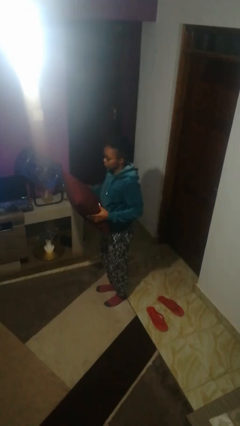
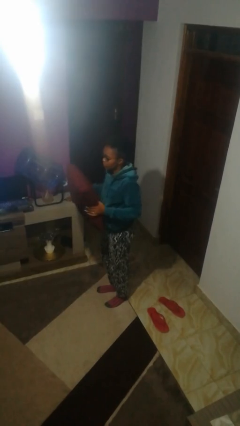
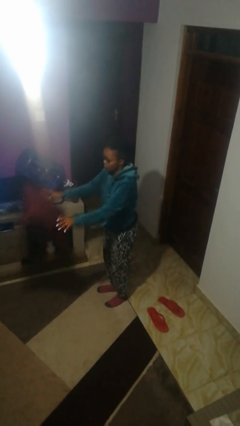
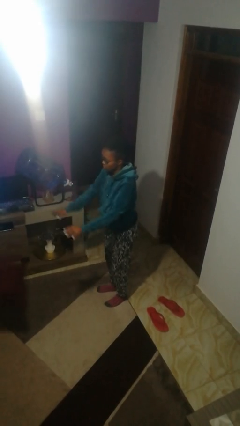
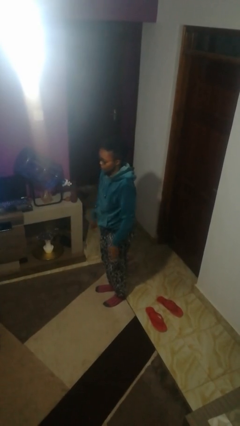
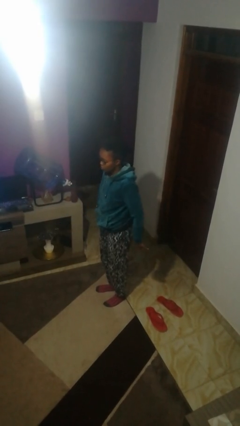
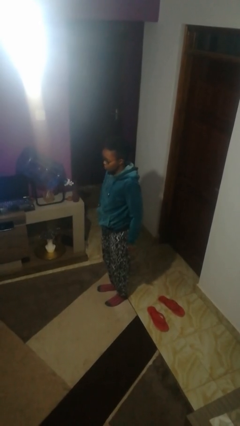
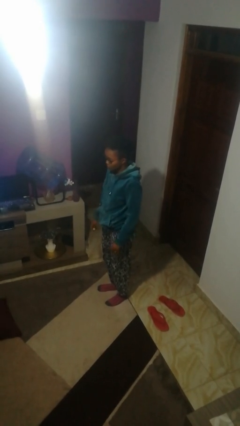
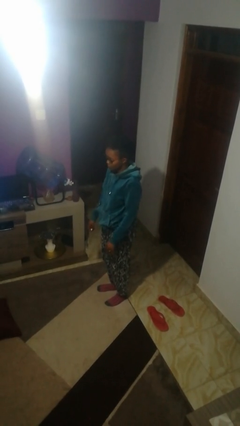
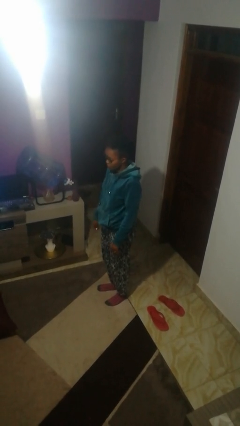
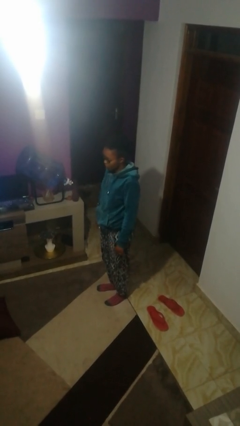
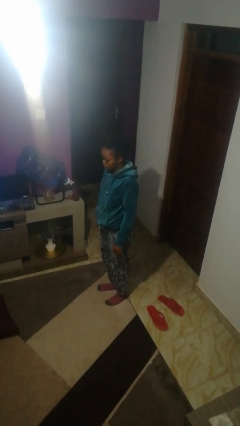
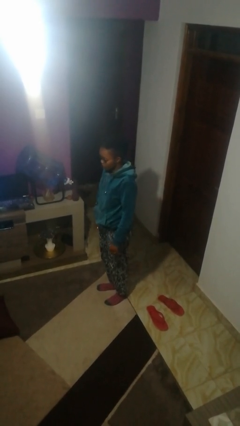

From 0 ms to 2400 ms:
person throws object to ground

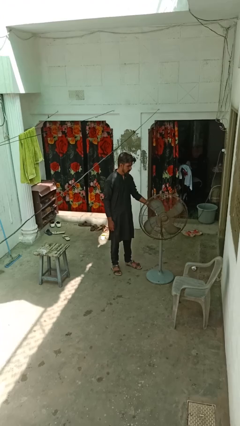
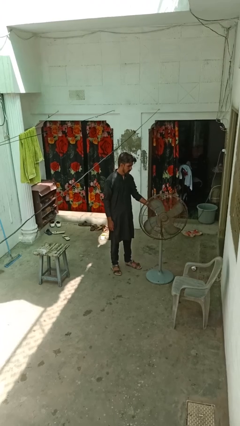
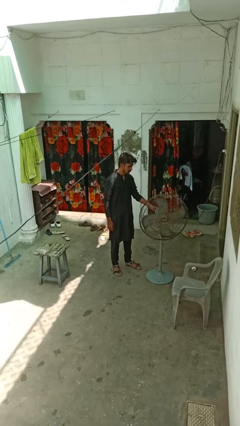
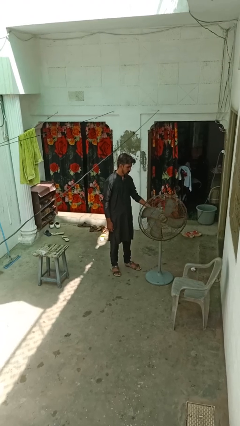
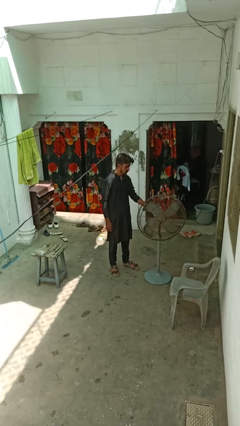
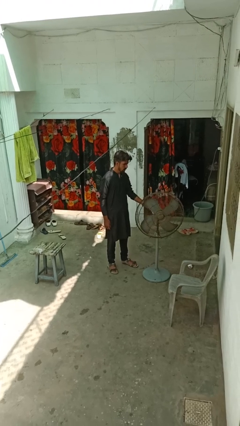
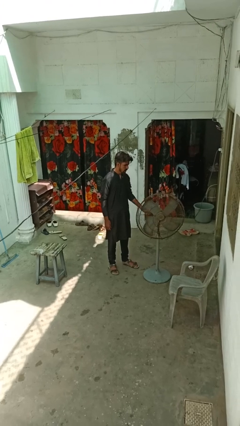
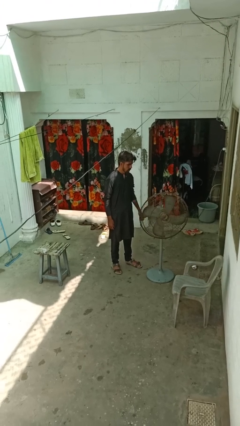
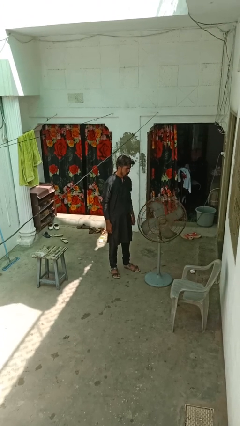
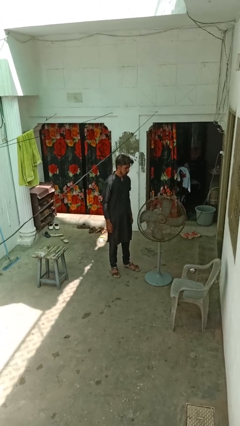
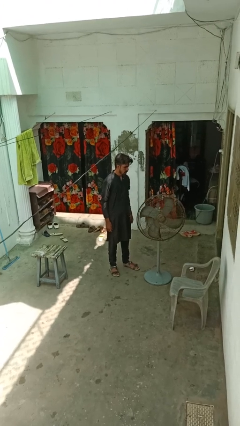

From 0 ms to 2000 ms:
person turns off fan

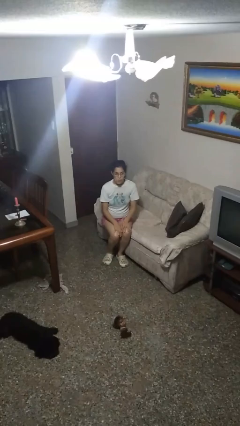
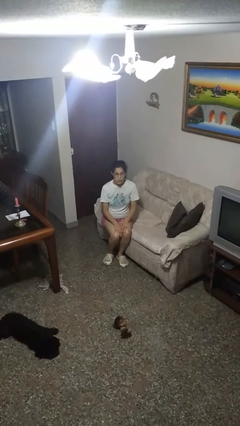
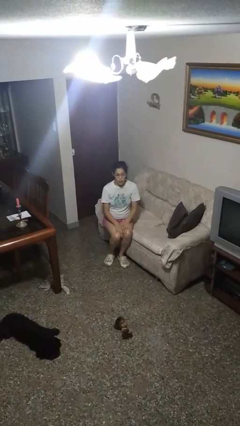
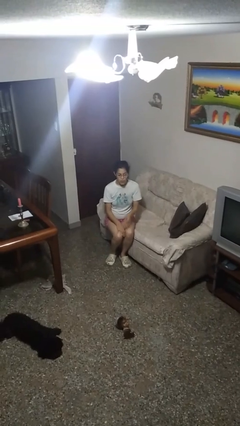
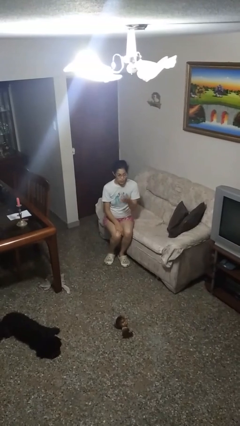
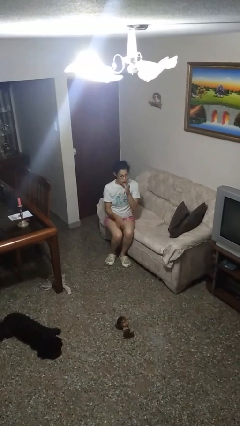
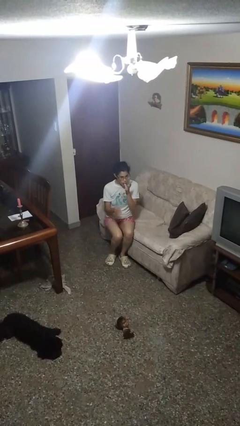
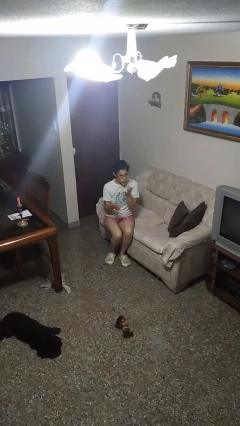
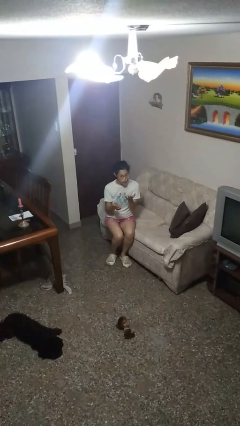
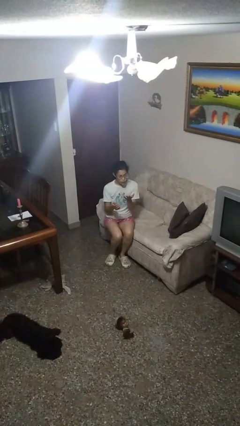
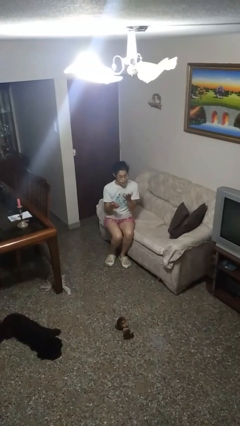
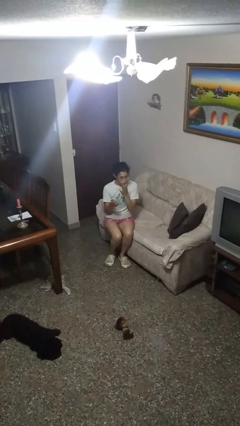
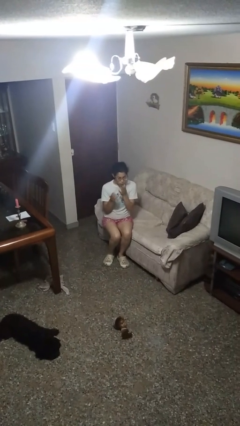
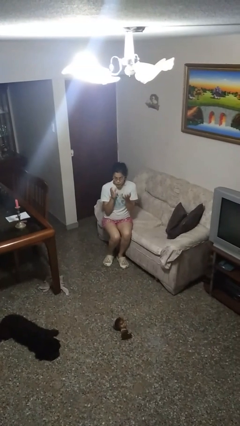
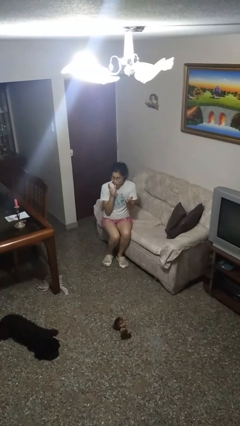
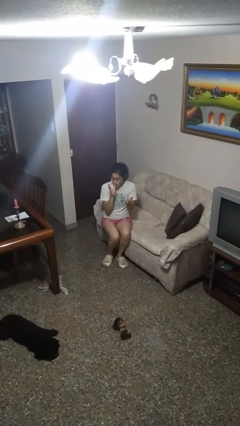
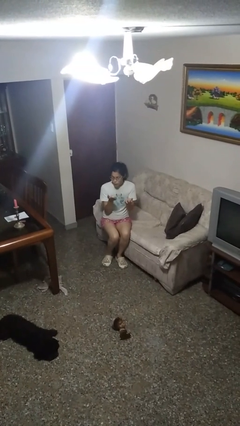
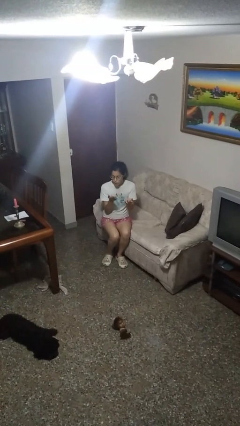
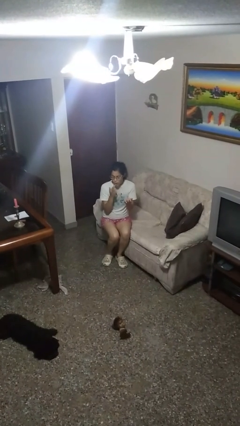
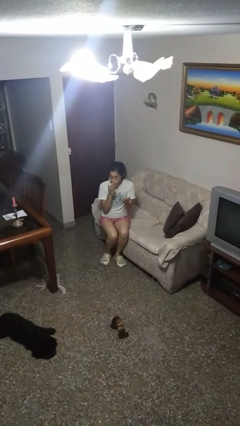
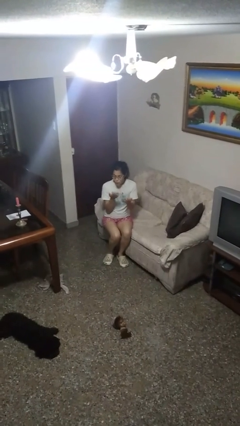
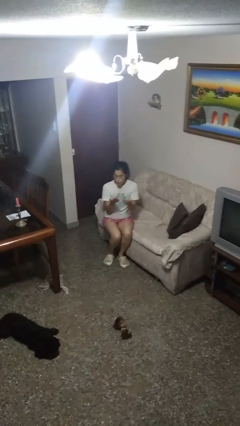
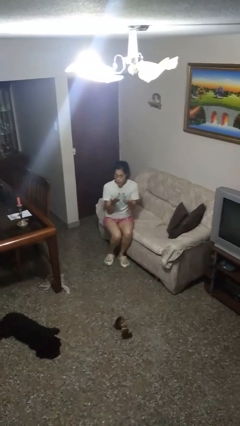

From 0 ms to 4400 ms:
person licks fingers

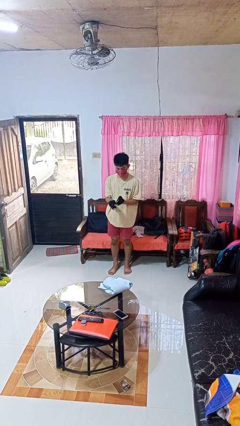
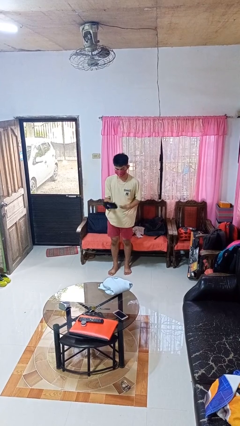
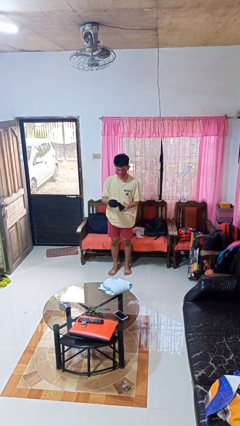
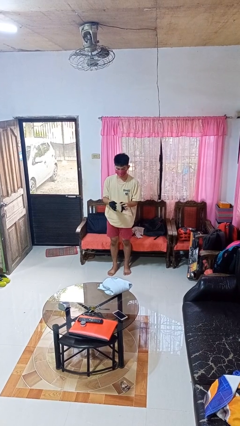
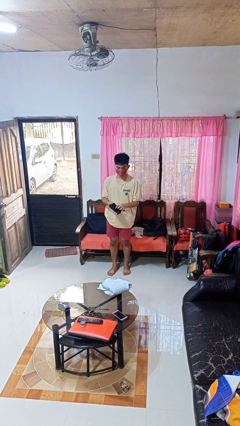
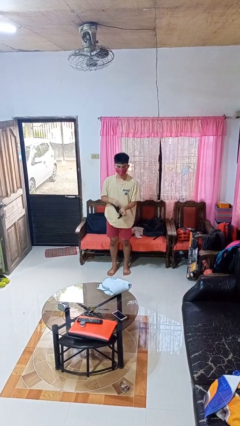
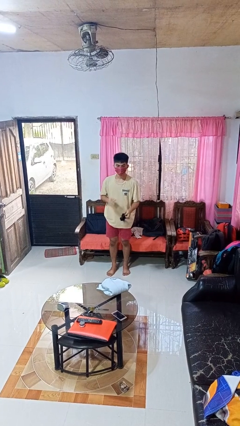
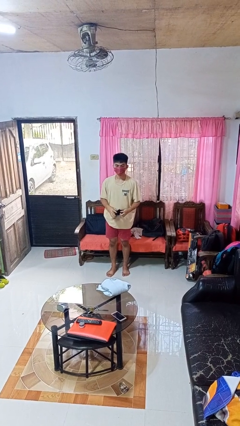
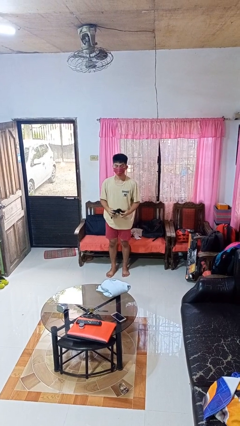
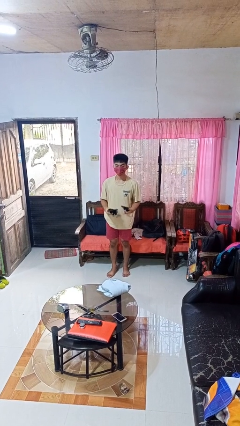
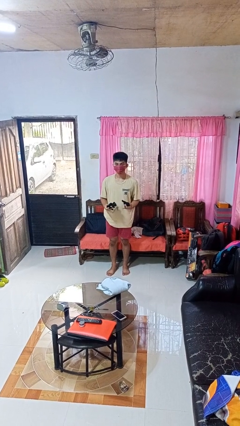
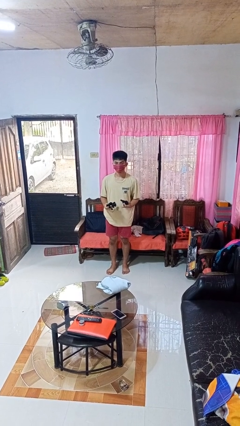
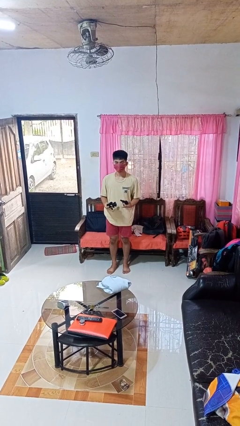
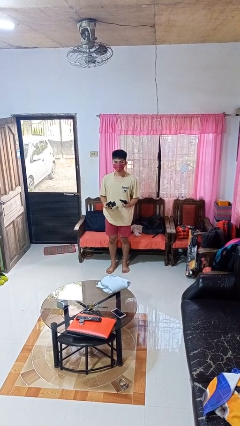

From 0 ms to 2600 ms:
person takes off gloves

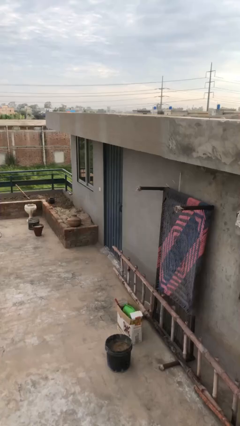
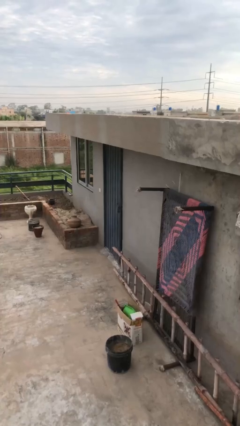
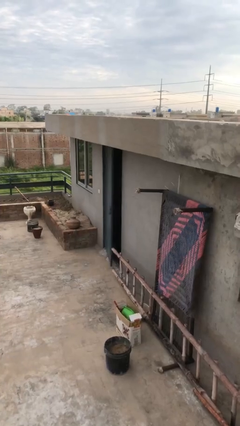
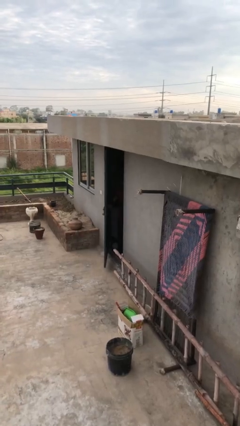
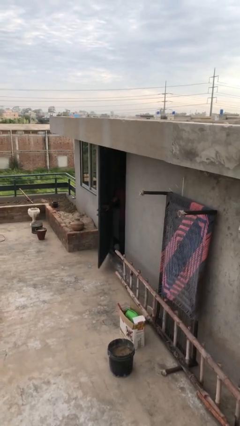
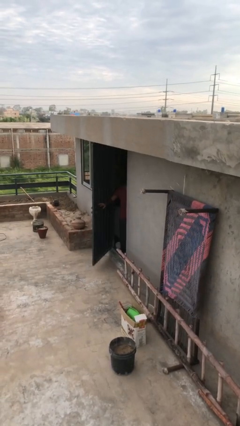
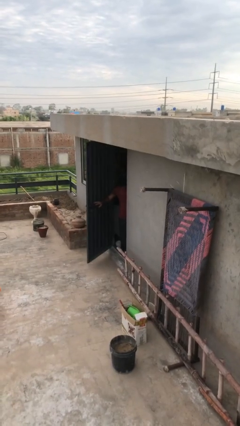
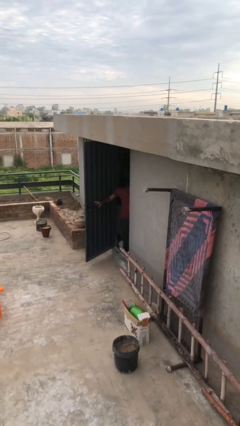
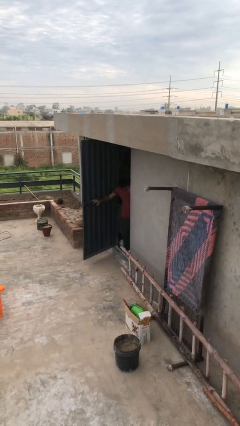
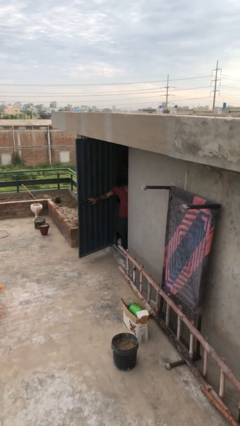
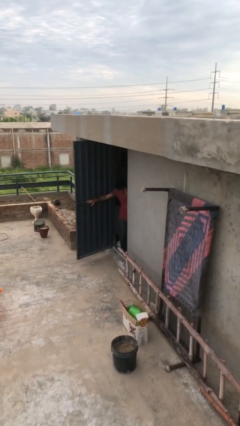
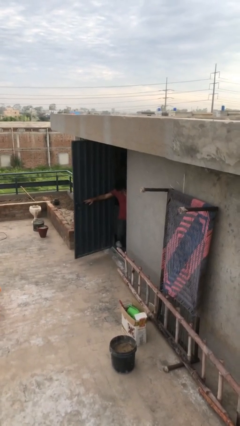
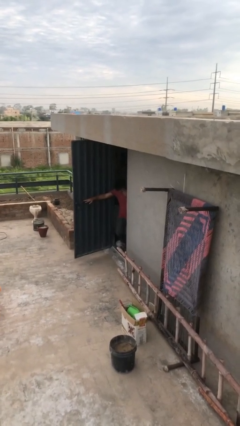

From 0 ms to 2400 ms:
person opens facility door

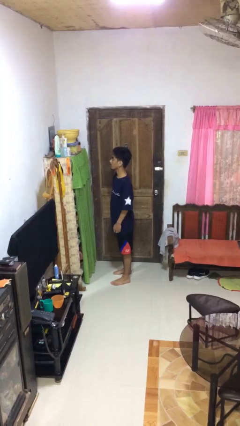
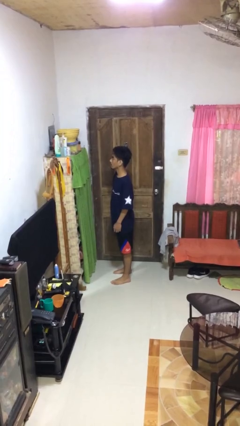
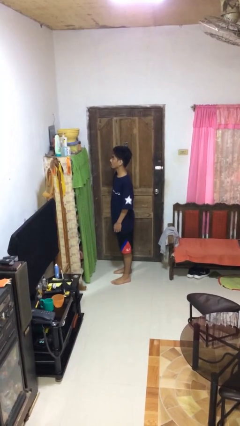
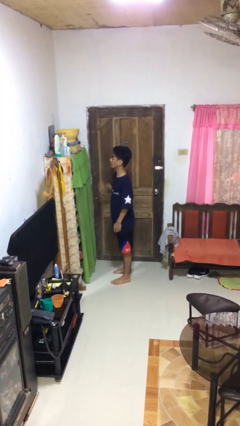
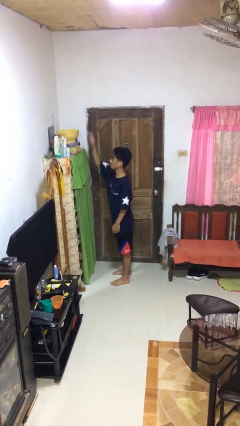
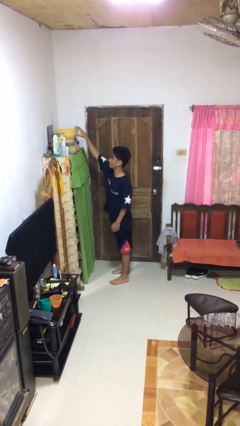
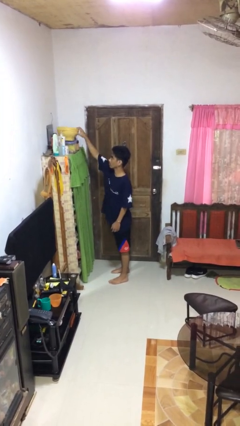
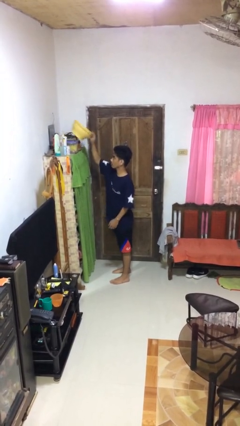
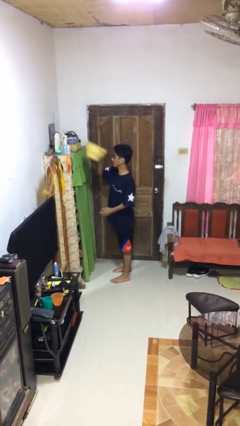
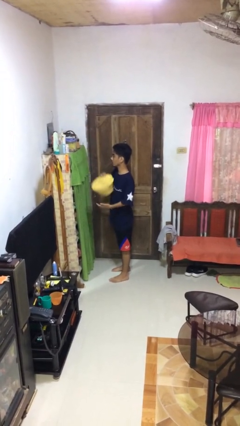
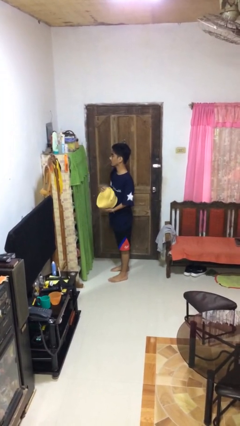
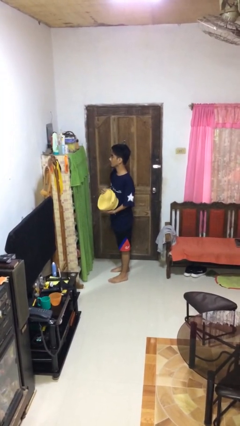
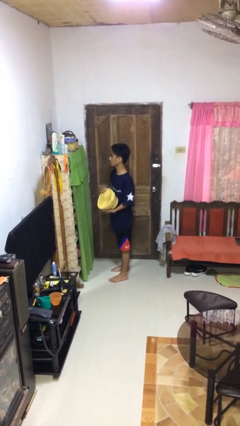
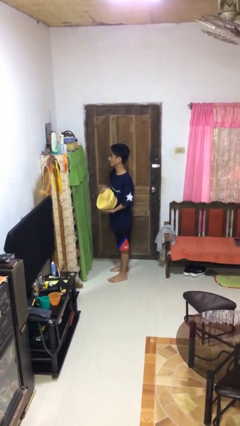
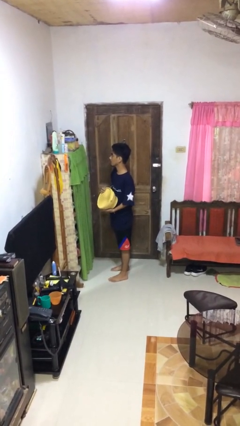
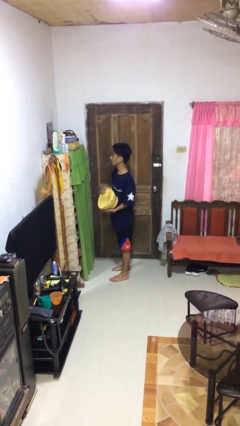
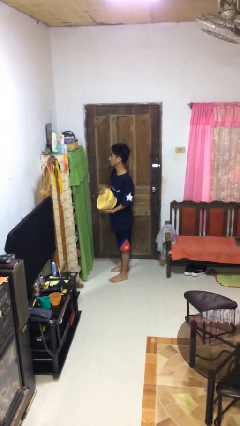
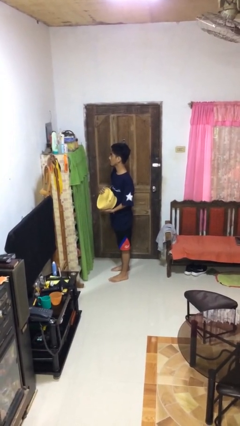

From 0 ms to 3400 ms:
person picks up object from shelf
